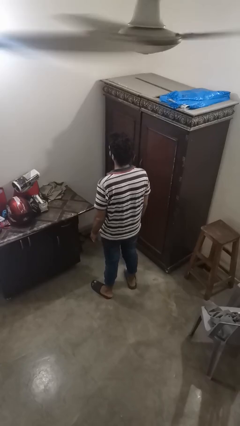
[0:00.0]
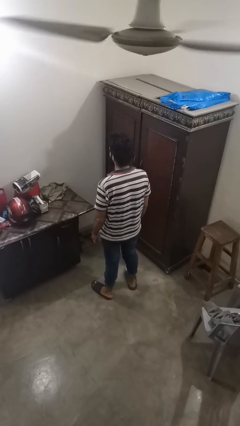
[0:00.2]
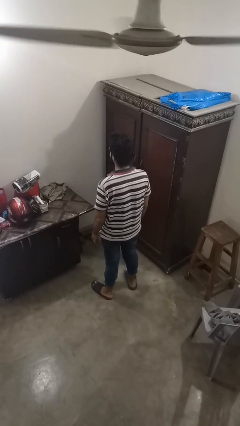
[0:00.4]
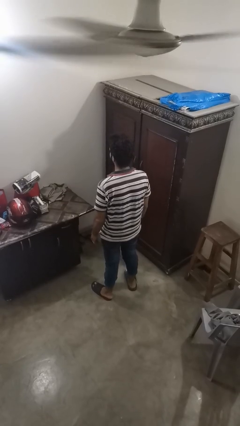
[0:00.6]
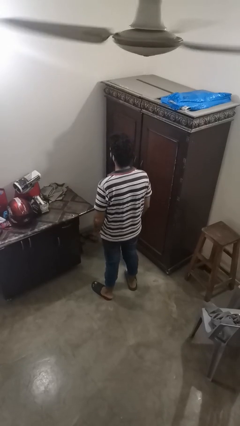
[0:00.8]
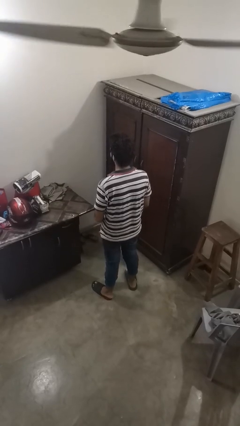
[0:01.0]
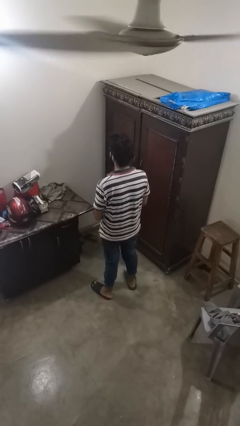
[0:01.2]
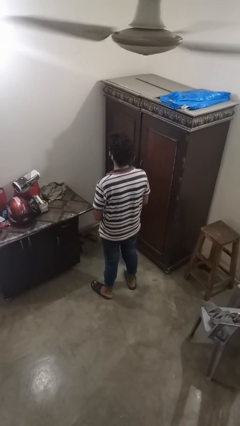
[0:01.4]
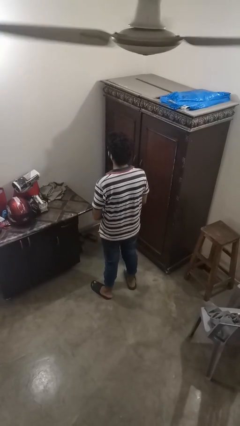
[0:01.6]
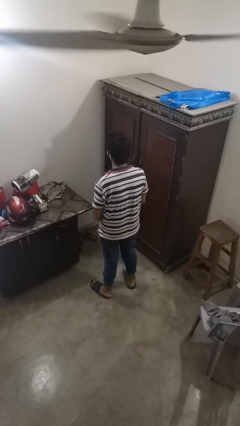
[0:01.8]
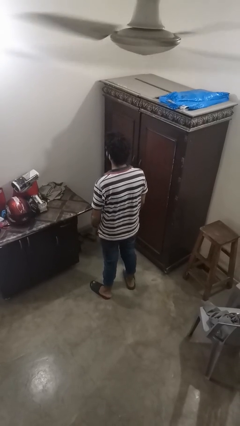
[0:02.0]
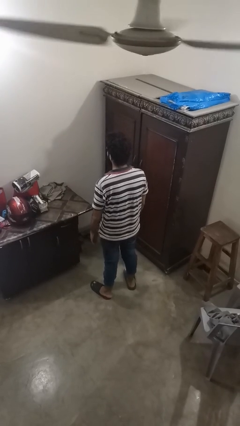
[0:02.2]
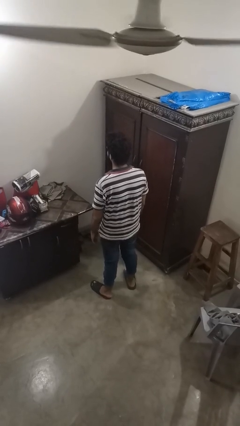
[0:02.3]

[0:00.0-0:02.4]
person takes off ring

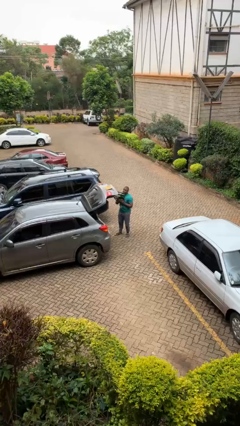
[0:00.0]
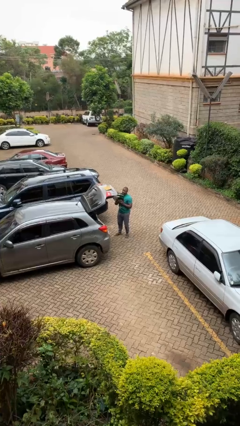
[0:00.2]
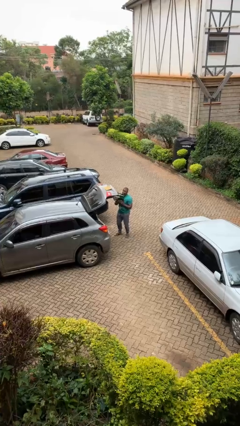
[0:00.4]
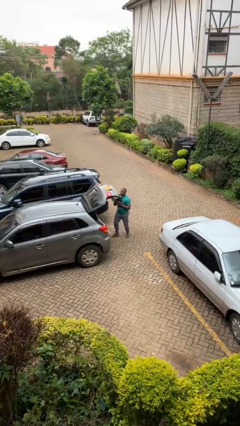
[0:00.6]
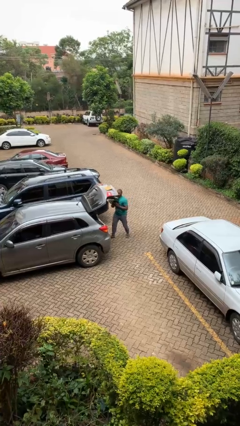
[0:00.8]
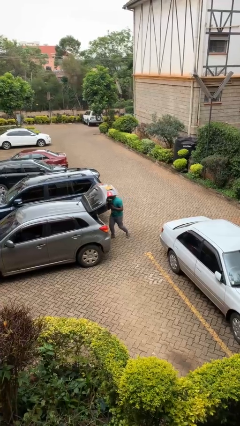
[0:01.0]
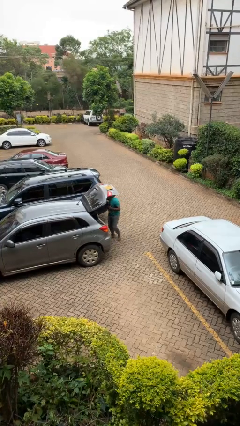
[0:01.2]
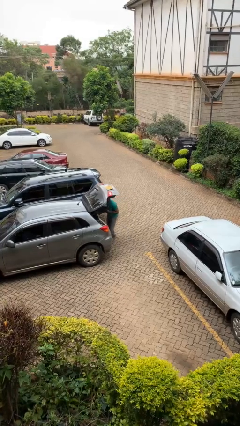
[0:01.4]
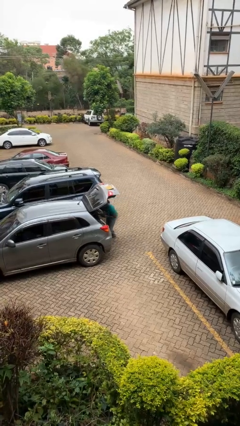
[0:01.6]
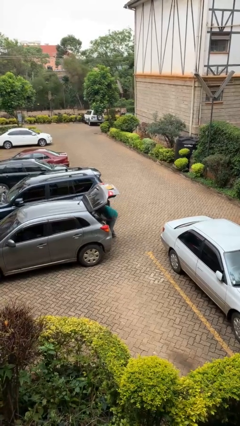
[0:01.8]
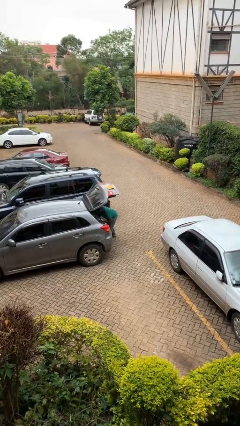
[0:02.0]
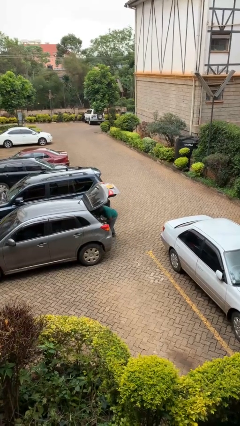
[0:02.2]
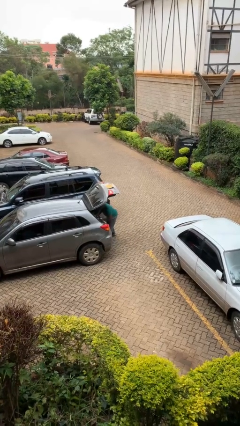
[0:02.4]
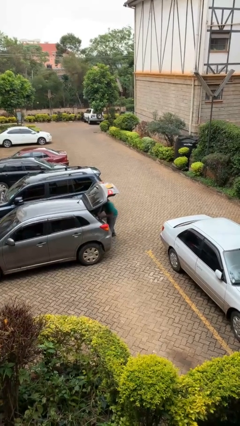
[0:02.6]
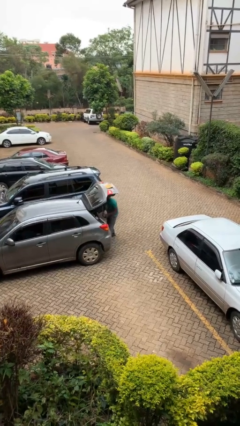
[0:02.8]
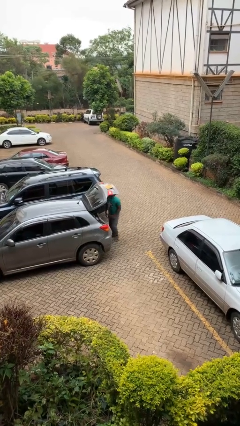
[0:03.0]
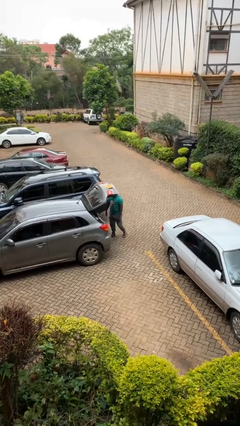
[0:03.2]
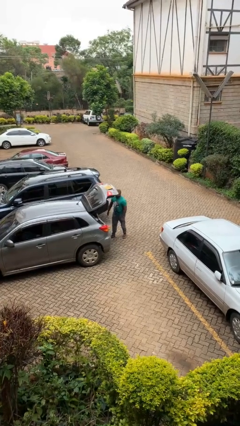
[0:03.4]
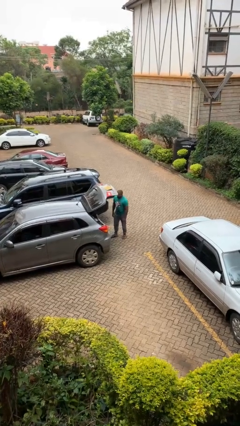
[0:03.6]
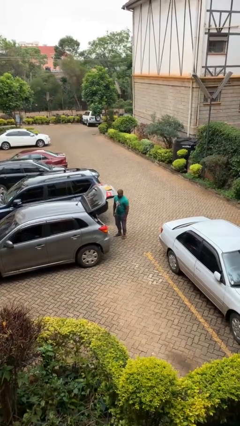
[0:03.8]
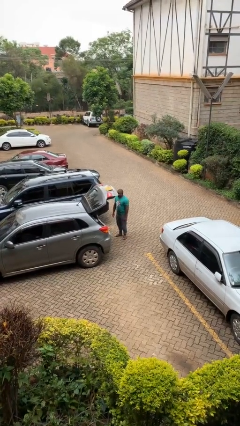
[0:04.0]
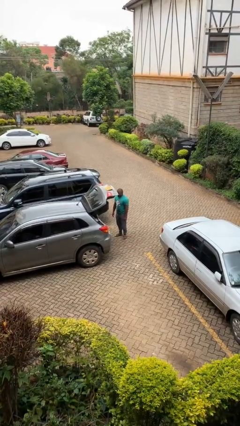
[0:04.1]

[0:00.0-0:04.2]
person loads car

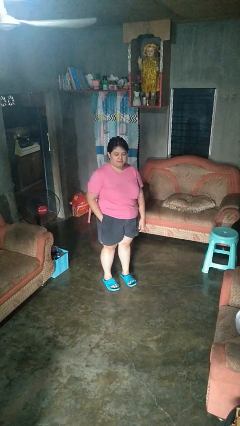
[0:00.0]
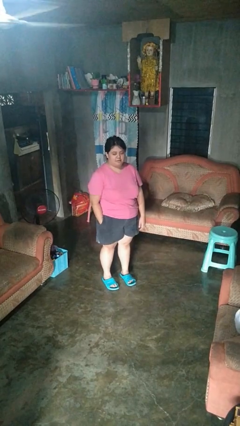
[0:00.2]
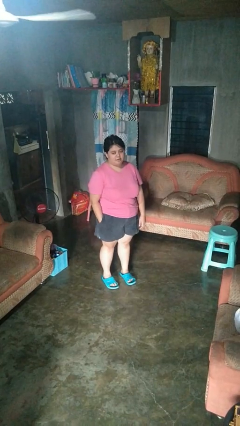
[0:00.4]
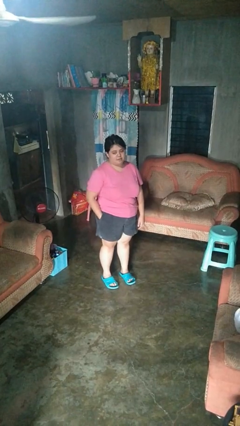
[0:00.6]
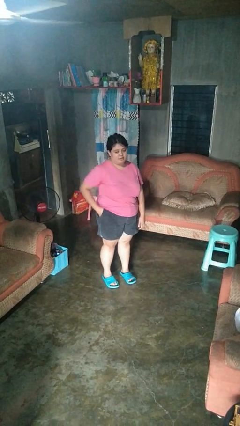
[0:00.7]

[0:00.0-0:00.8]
person takes phone from pocket

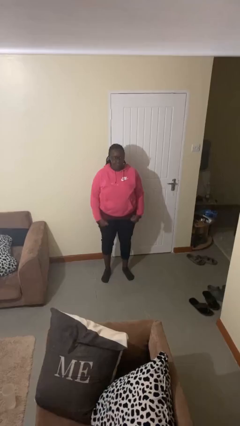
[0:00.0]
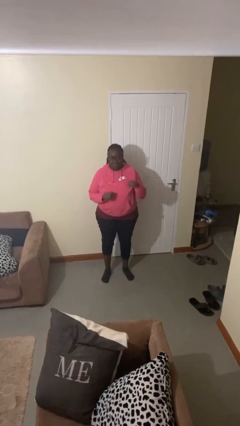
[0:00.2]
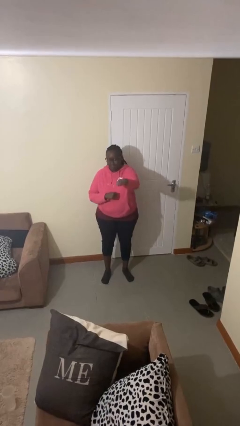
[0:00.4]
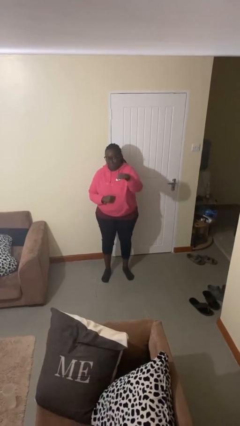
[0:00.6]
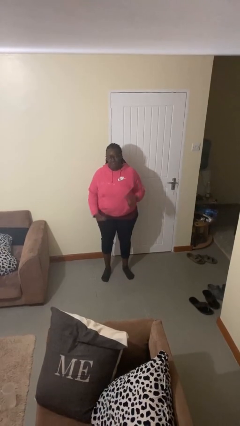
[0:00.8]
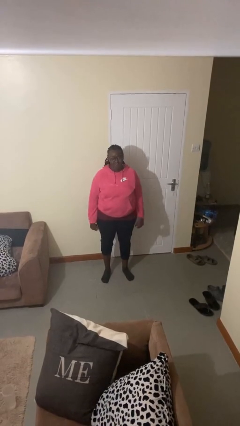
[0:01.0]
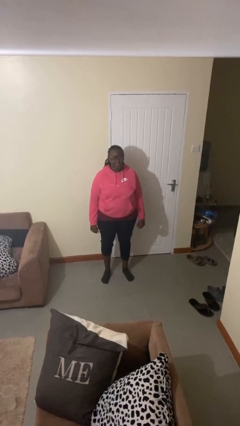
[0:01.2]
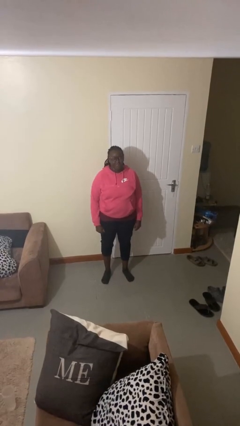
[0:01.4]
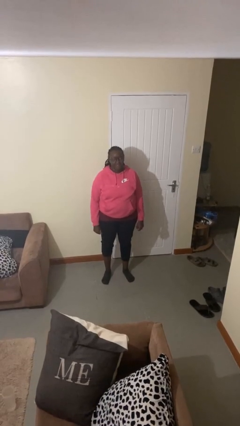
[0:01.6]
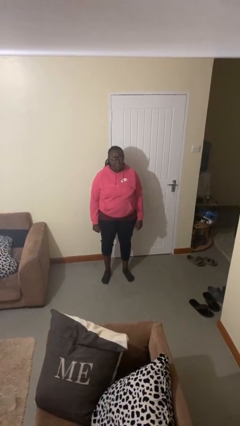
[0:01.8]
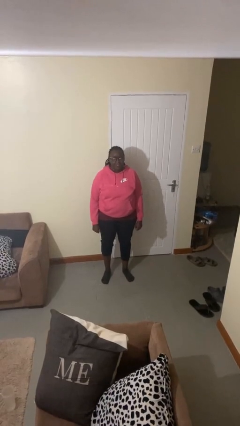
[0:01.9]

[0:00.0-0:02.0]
person punches

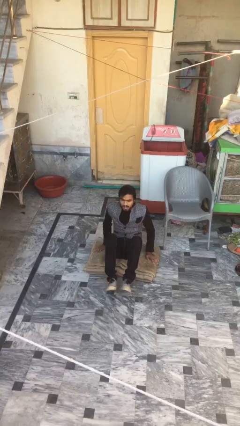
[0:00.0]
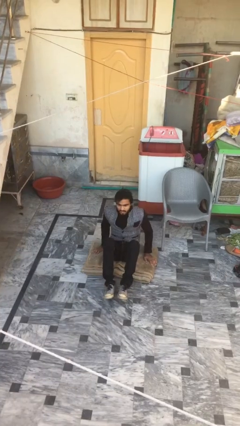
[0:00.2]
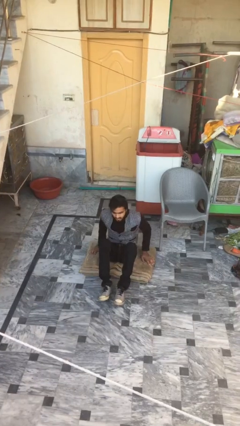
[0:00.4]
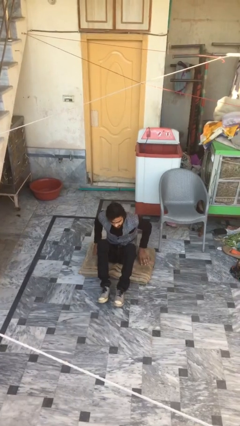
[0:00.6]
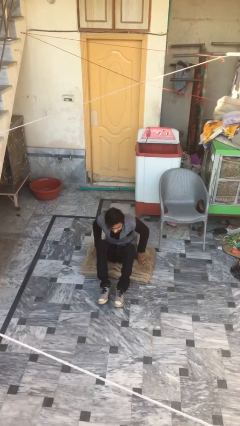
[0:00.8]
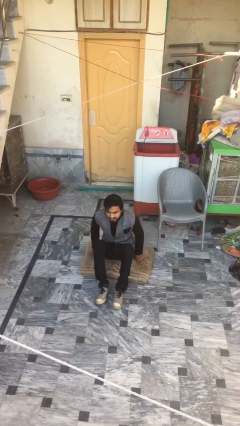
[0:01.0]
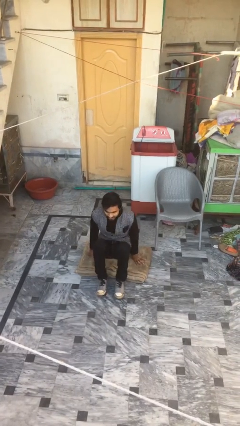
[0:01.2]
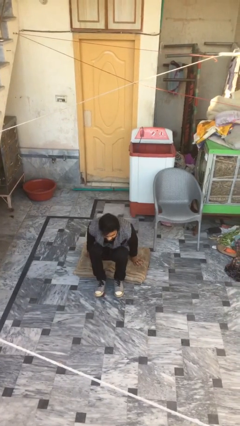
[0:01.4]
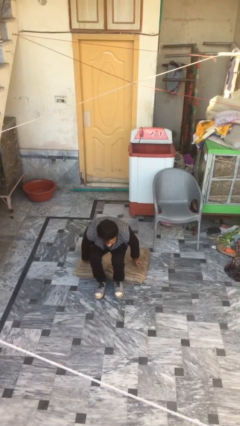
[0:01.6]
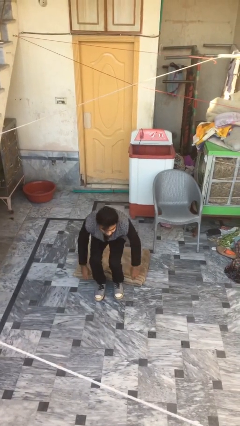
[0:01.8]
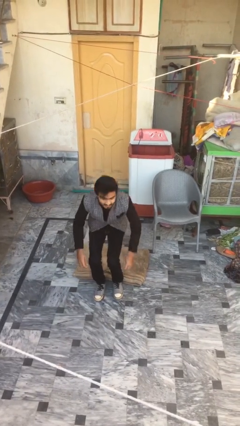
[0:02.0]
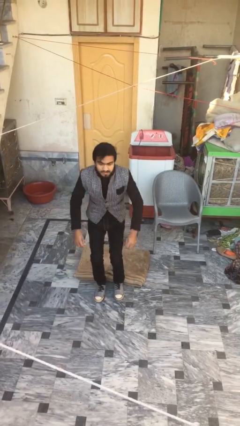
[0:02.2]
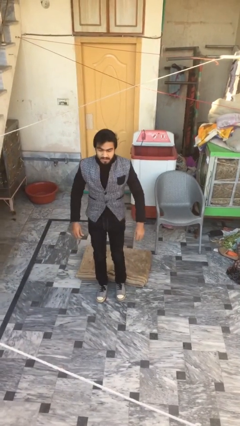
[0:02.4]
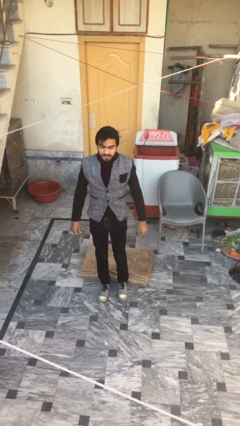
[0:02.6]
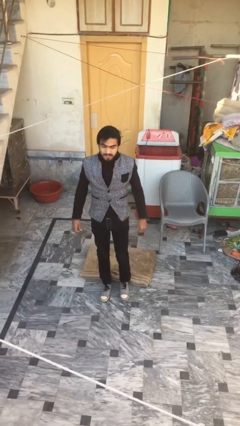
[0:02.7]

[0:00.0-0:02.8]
person stands up

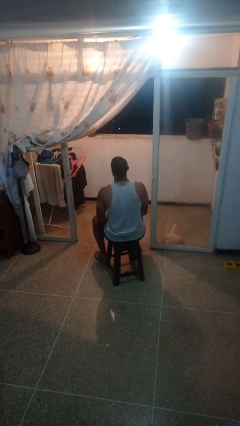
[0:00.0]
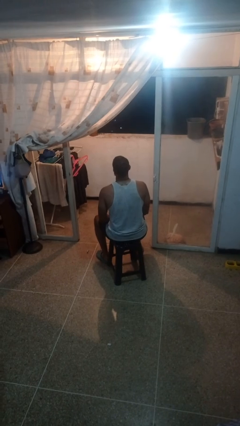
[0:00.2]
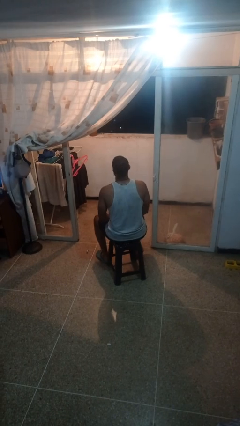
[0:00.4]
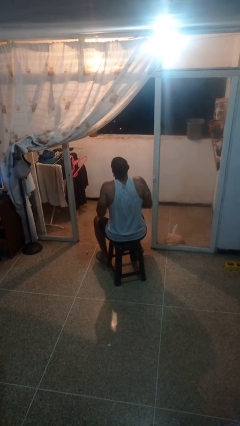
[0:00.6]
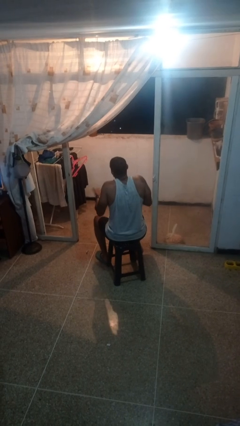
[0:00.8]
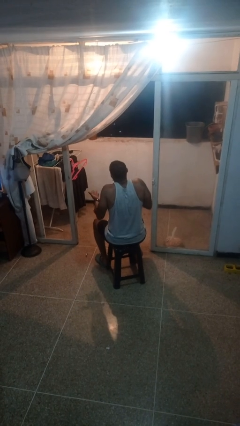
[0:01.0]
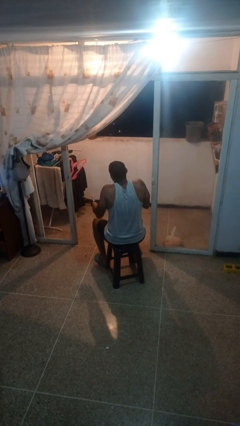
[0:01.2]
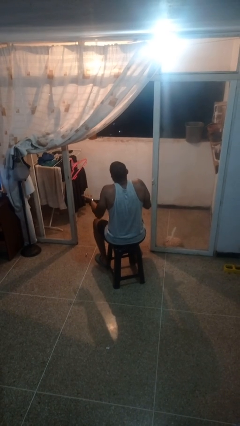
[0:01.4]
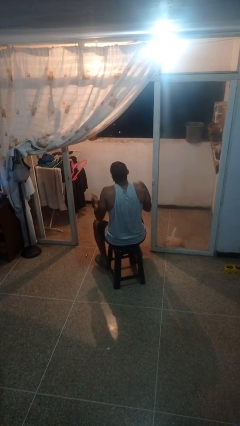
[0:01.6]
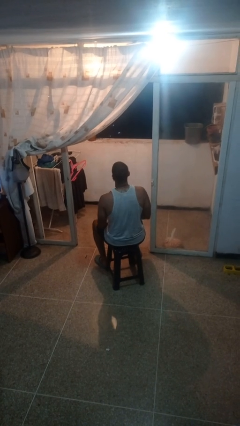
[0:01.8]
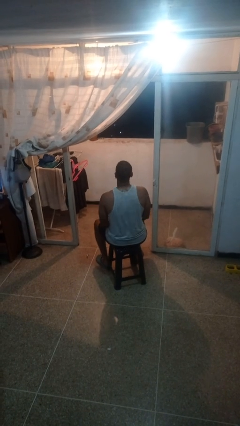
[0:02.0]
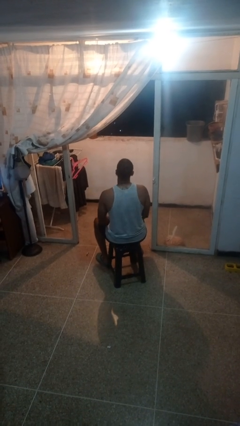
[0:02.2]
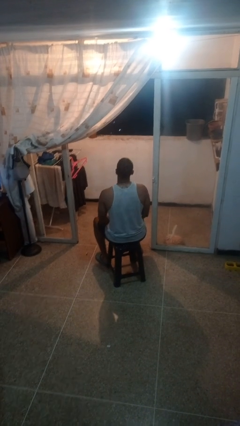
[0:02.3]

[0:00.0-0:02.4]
person shrugs

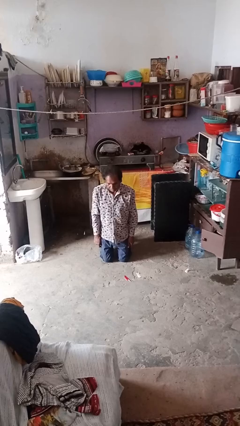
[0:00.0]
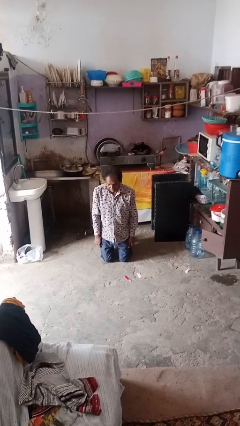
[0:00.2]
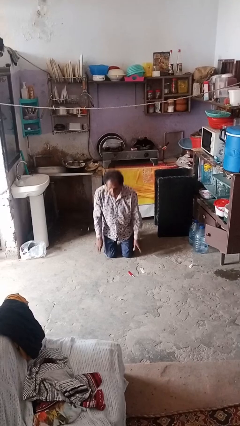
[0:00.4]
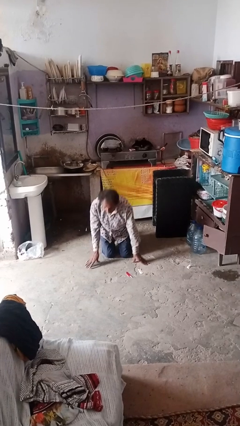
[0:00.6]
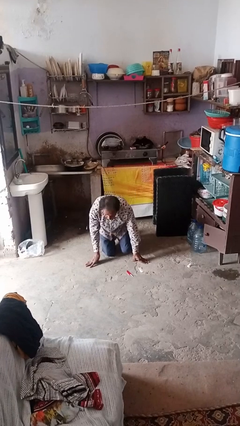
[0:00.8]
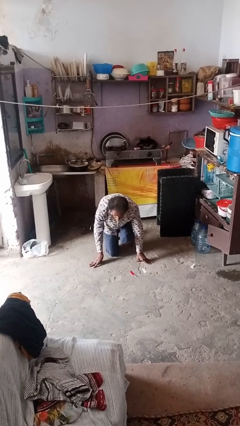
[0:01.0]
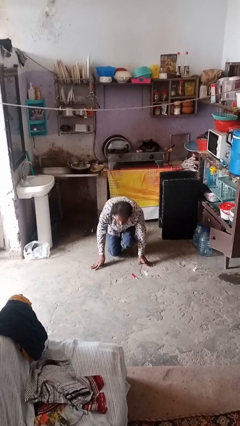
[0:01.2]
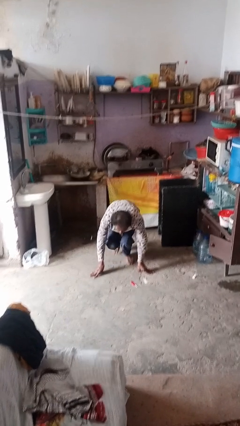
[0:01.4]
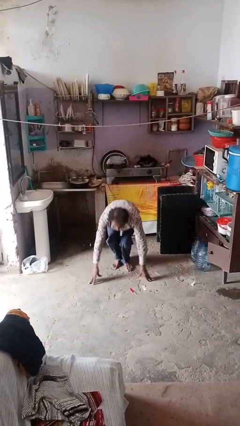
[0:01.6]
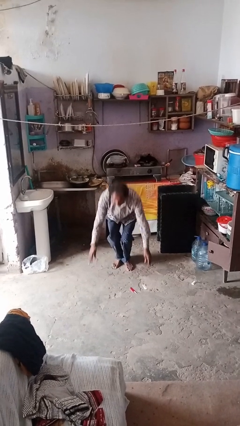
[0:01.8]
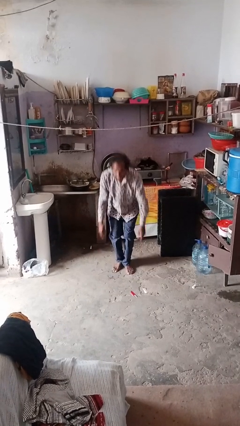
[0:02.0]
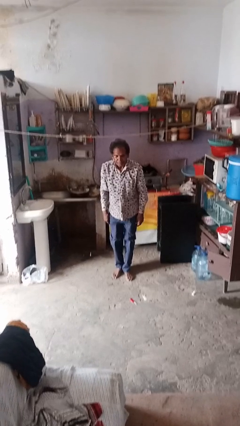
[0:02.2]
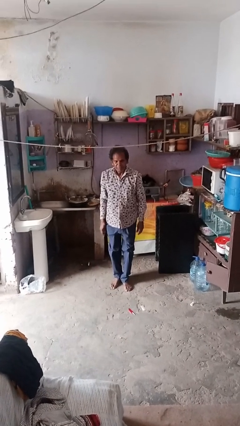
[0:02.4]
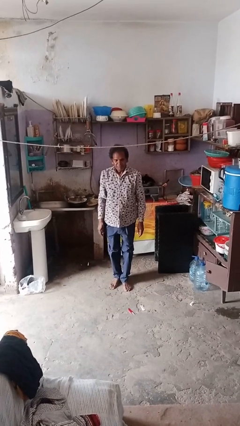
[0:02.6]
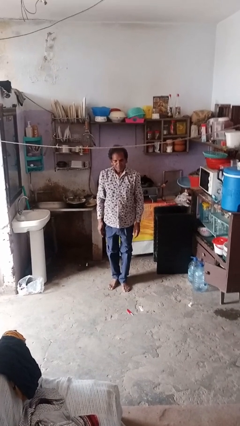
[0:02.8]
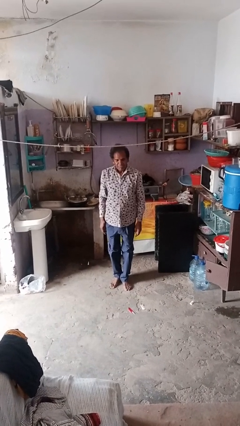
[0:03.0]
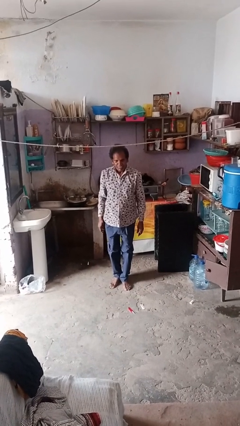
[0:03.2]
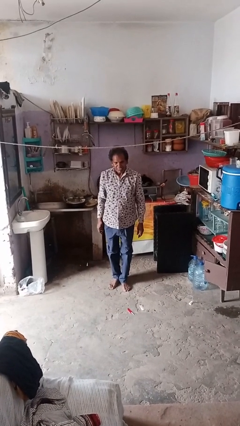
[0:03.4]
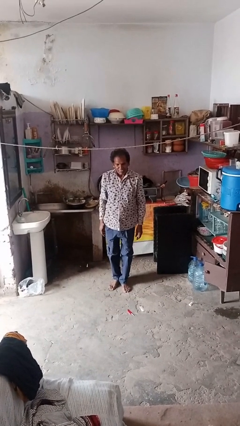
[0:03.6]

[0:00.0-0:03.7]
person stands up from floor
